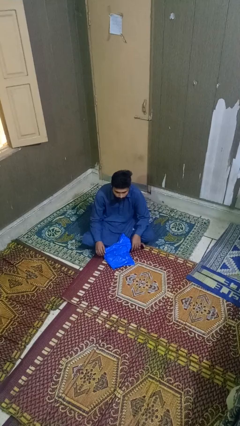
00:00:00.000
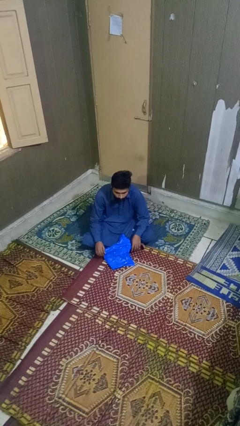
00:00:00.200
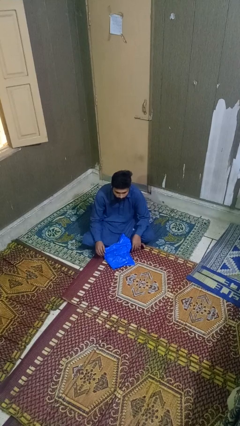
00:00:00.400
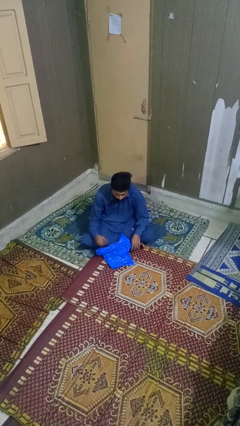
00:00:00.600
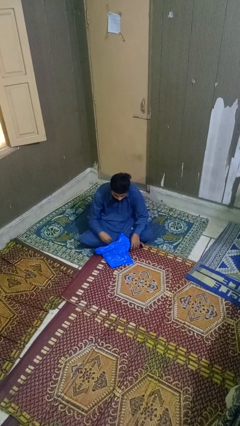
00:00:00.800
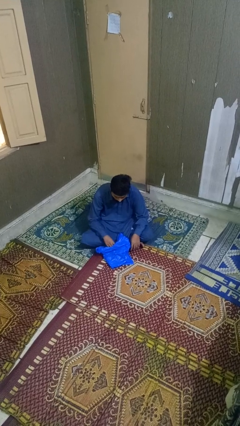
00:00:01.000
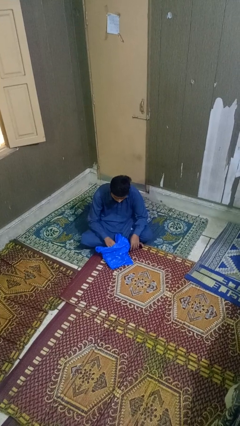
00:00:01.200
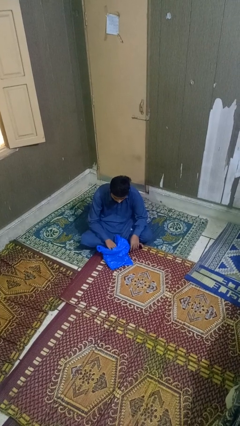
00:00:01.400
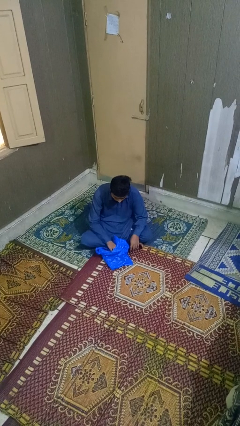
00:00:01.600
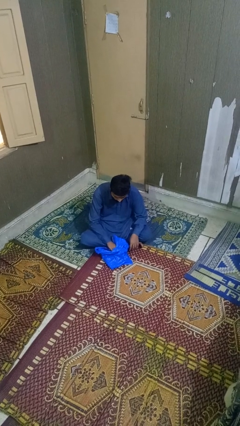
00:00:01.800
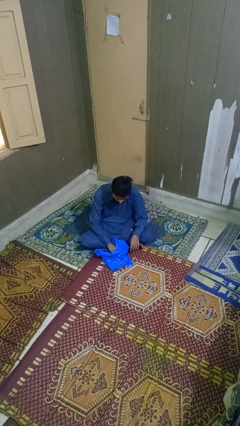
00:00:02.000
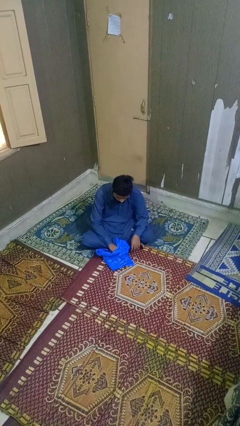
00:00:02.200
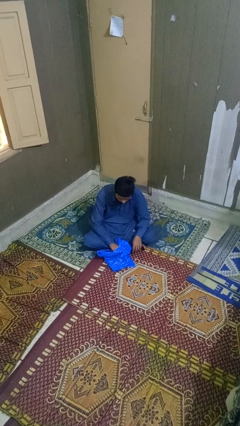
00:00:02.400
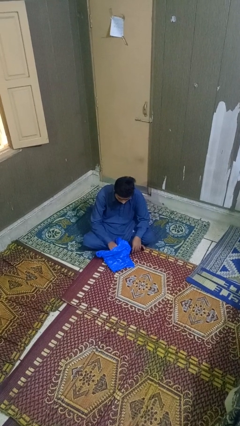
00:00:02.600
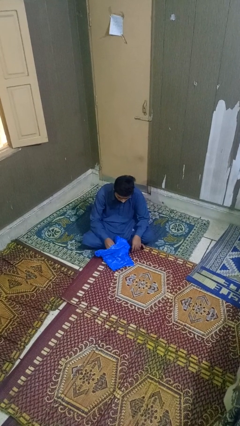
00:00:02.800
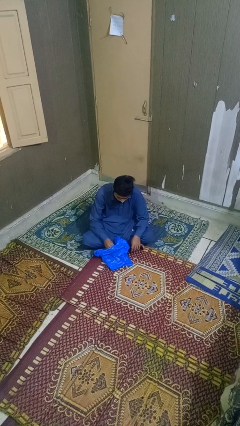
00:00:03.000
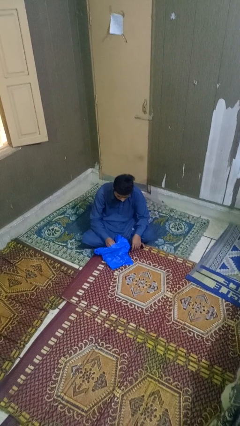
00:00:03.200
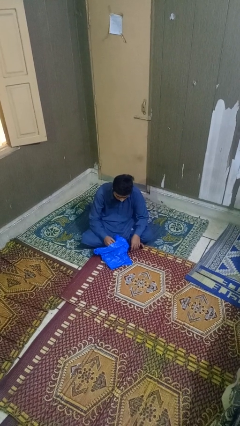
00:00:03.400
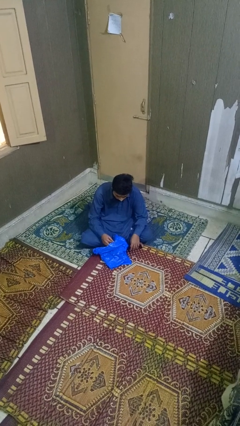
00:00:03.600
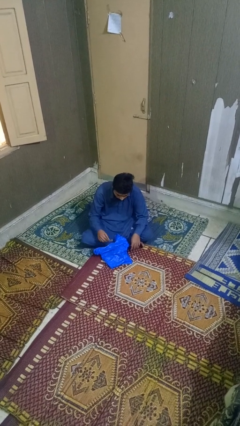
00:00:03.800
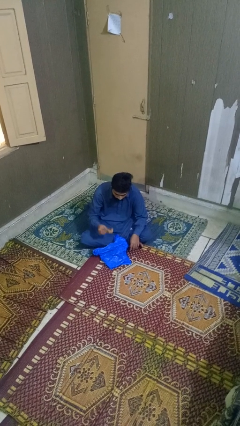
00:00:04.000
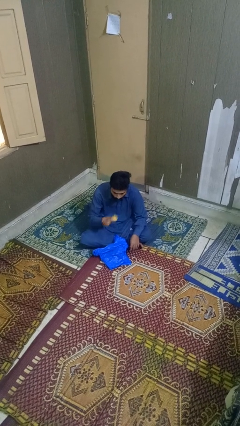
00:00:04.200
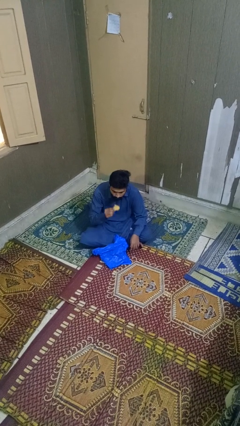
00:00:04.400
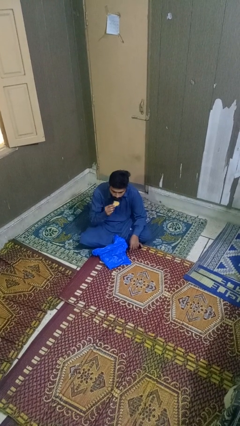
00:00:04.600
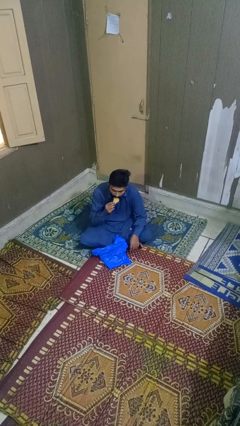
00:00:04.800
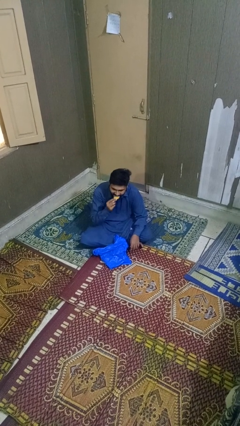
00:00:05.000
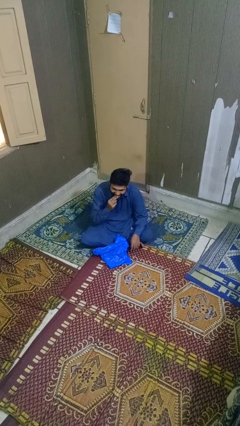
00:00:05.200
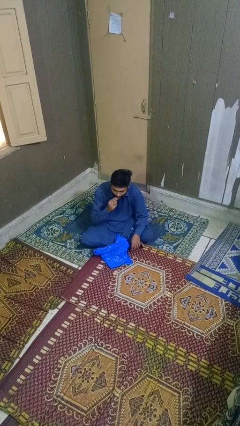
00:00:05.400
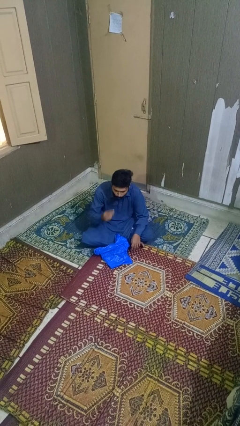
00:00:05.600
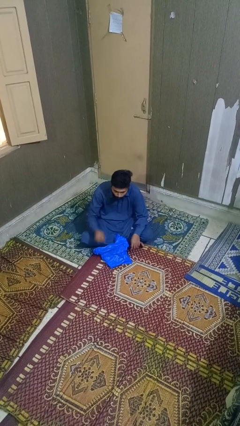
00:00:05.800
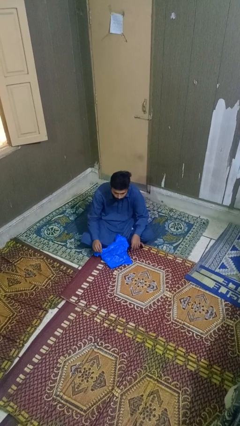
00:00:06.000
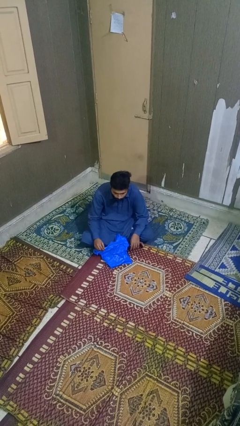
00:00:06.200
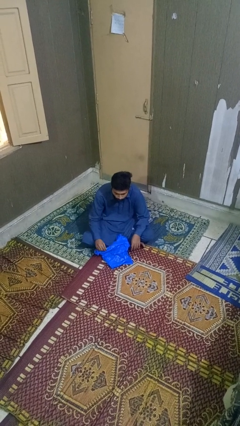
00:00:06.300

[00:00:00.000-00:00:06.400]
person eats snack from bag

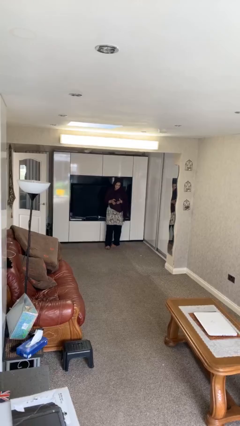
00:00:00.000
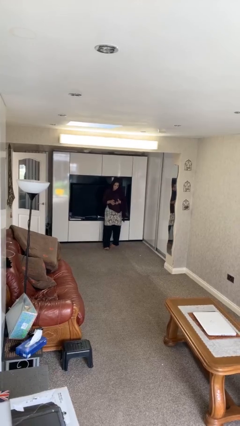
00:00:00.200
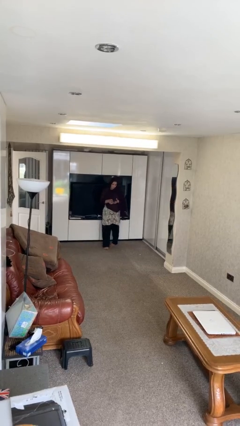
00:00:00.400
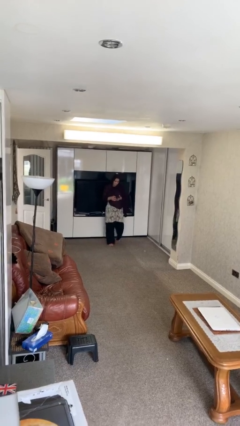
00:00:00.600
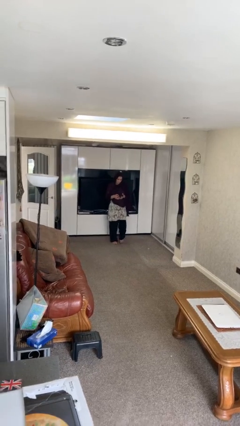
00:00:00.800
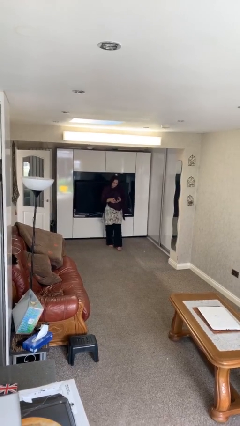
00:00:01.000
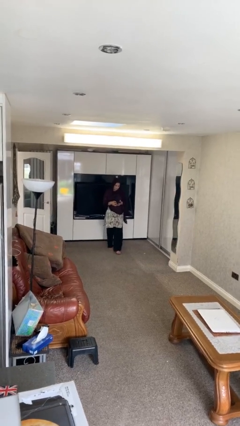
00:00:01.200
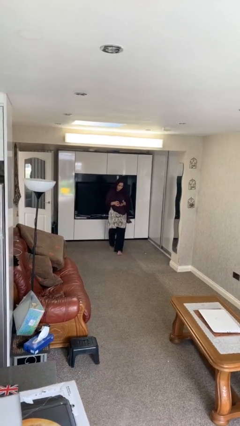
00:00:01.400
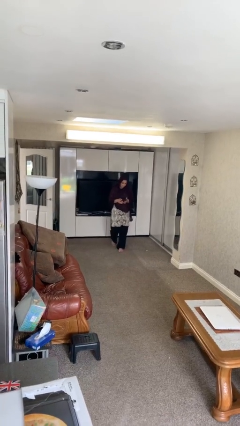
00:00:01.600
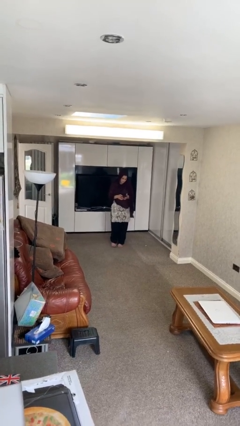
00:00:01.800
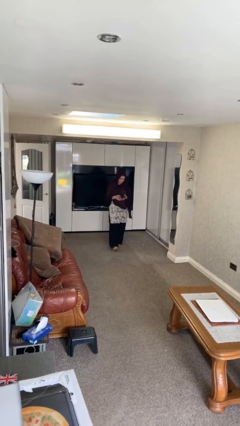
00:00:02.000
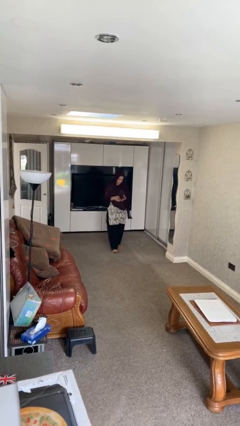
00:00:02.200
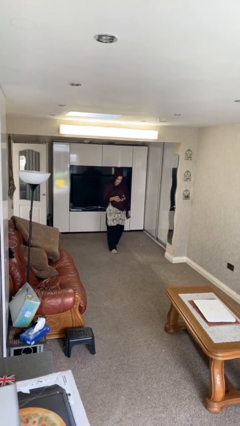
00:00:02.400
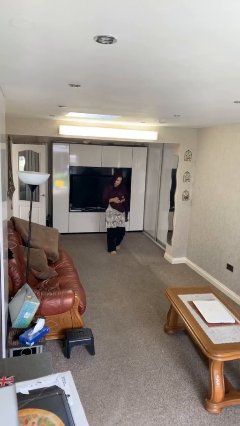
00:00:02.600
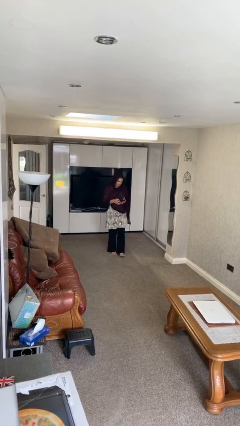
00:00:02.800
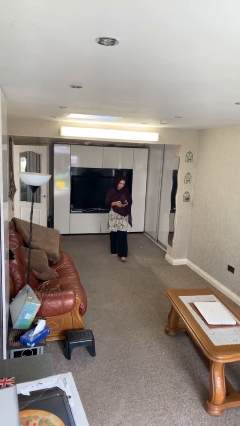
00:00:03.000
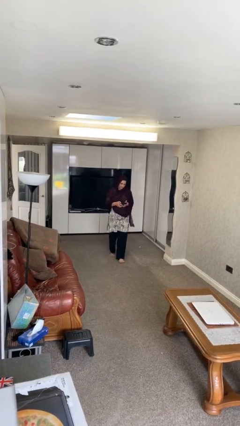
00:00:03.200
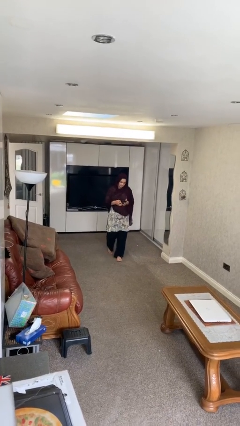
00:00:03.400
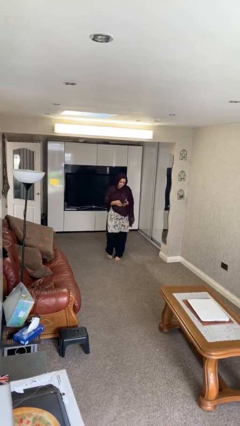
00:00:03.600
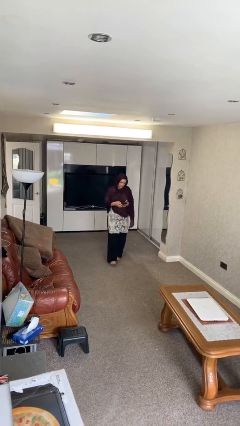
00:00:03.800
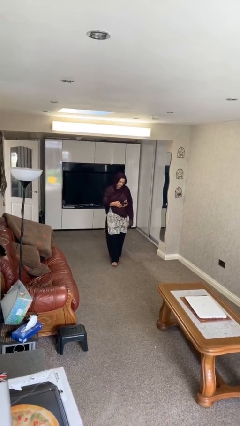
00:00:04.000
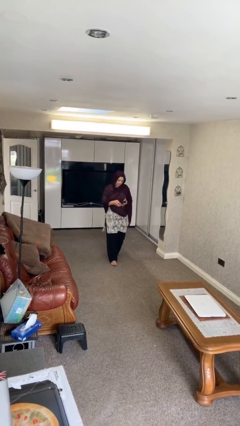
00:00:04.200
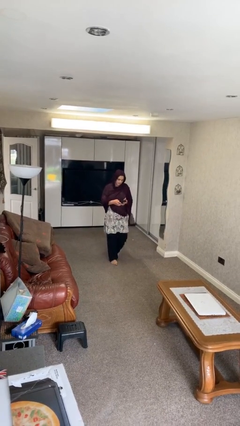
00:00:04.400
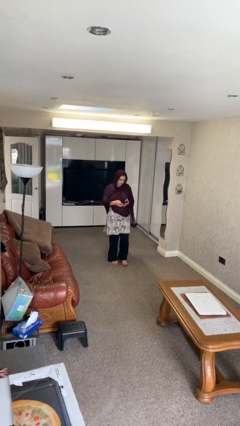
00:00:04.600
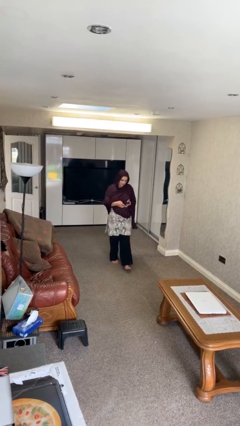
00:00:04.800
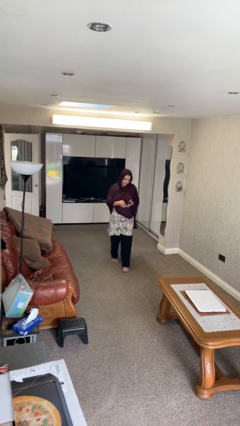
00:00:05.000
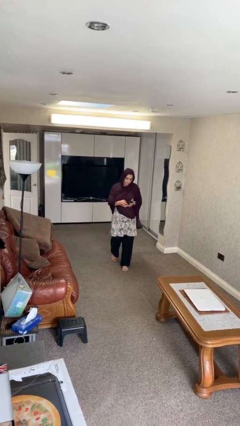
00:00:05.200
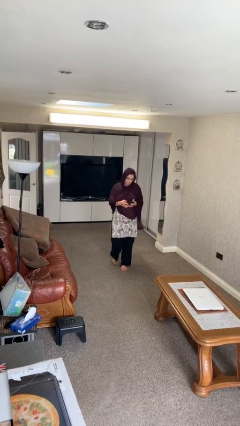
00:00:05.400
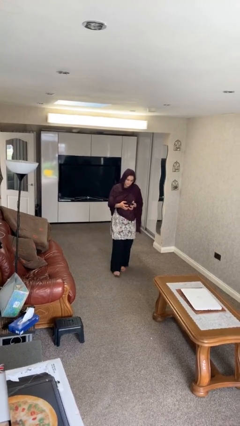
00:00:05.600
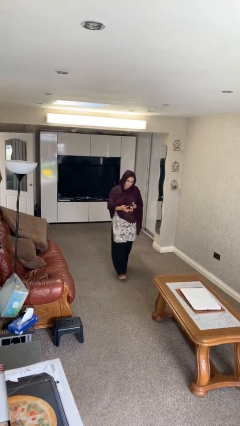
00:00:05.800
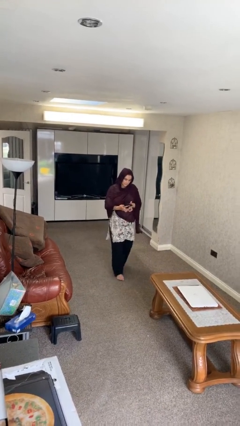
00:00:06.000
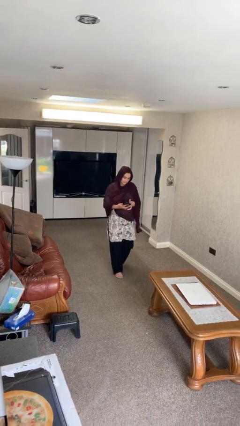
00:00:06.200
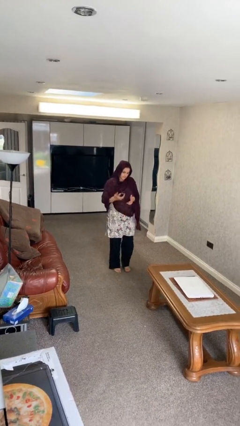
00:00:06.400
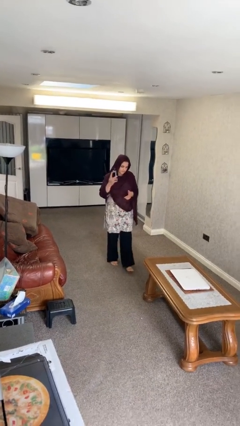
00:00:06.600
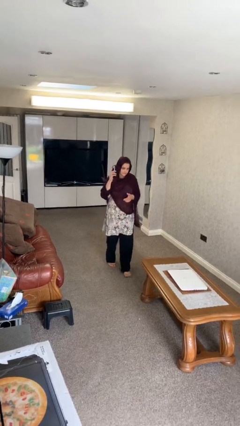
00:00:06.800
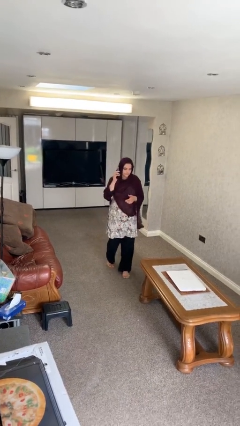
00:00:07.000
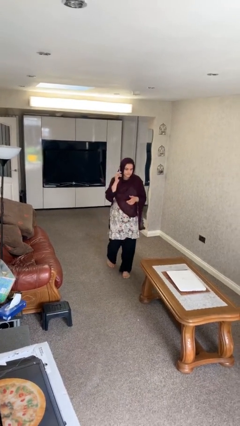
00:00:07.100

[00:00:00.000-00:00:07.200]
person texts on phone

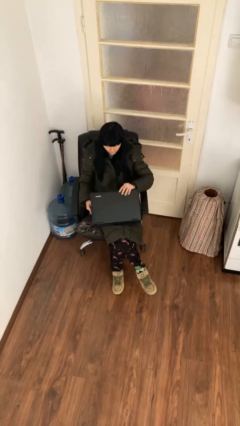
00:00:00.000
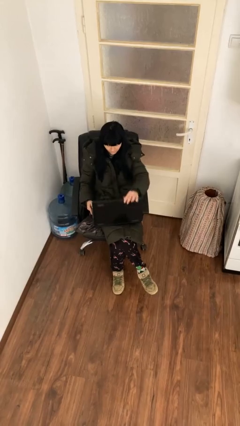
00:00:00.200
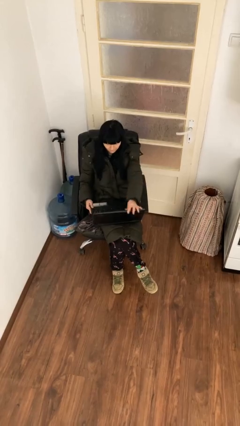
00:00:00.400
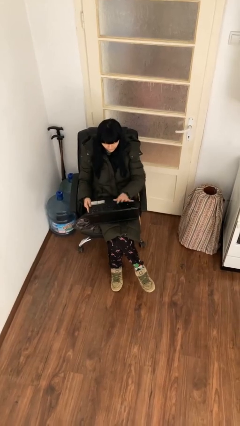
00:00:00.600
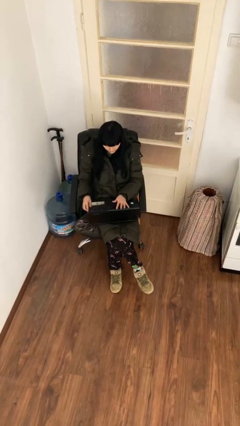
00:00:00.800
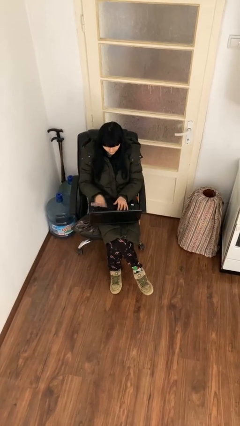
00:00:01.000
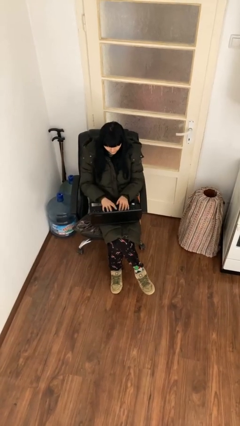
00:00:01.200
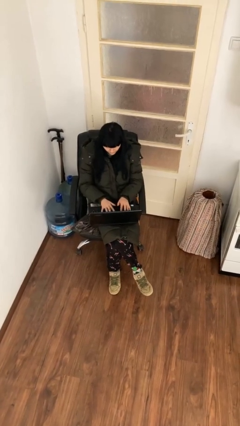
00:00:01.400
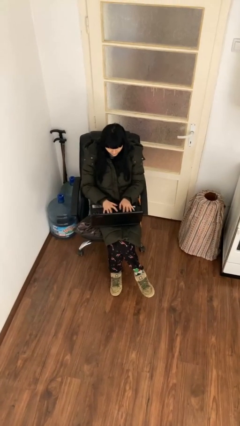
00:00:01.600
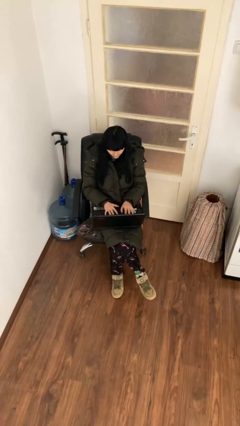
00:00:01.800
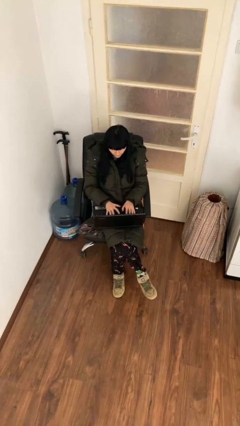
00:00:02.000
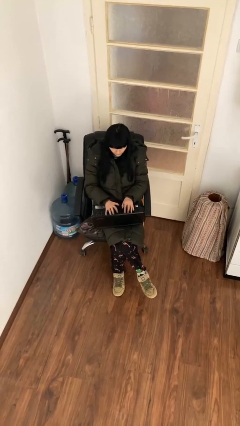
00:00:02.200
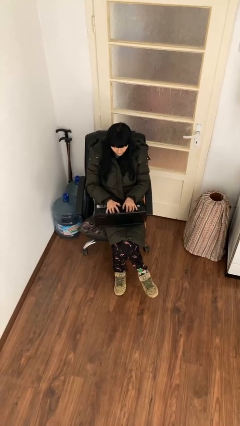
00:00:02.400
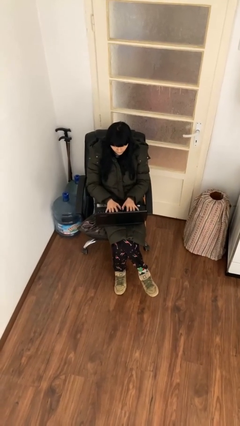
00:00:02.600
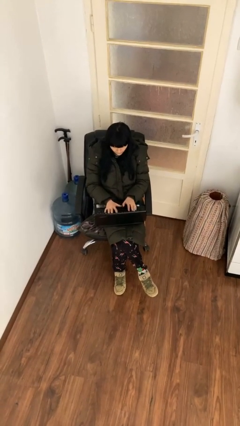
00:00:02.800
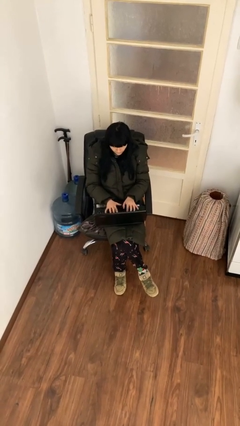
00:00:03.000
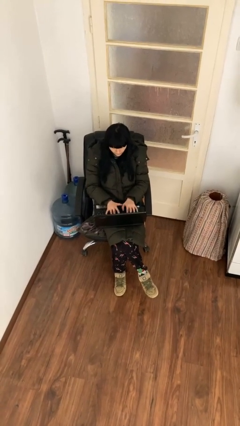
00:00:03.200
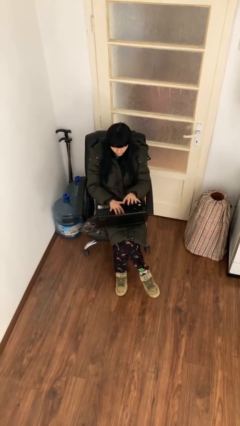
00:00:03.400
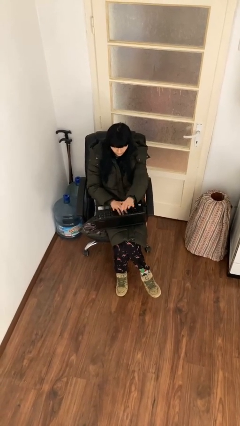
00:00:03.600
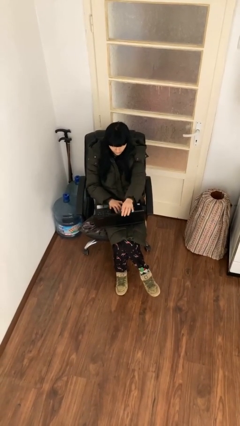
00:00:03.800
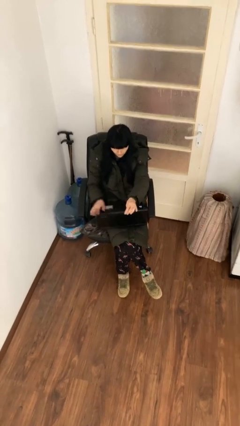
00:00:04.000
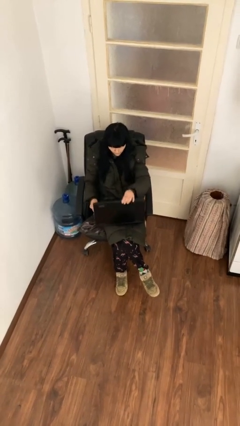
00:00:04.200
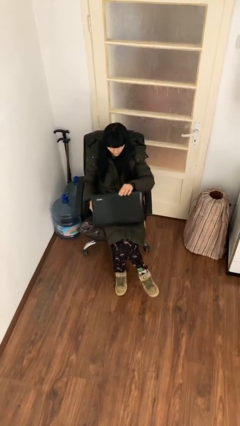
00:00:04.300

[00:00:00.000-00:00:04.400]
person interacts with laptop
